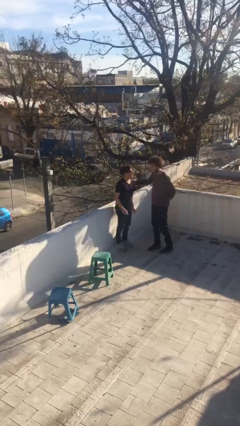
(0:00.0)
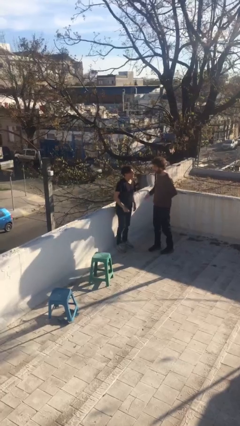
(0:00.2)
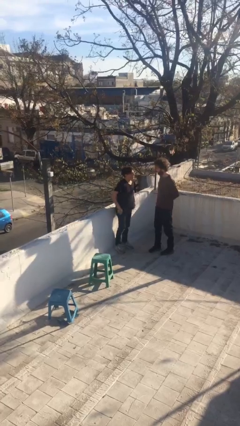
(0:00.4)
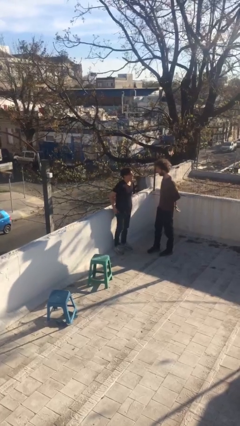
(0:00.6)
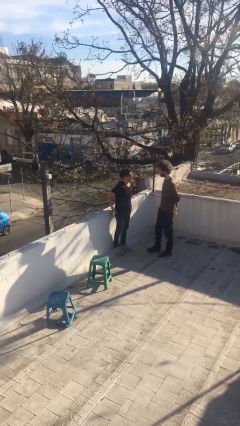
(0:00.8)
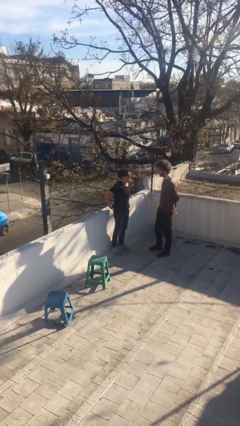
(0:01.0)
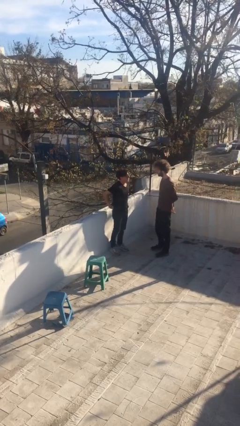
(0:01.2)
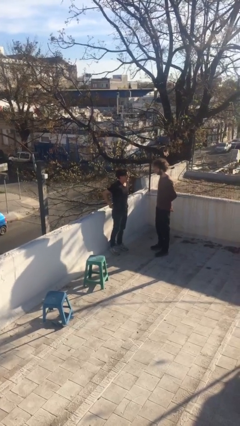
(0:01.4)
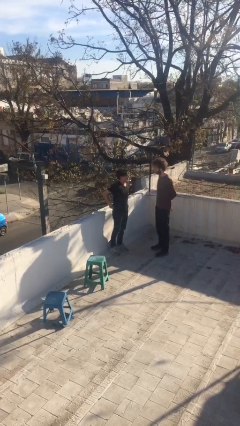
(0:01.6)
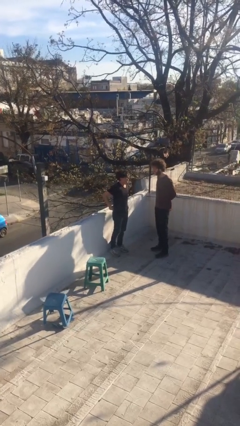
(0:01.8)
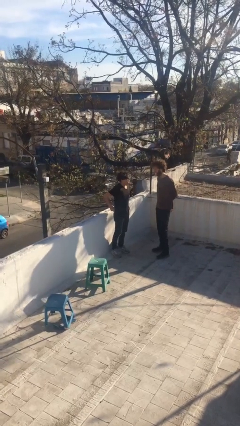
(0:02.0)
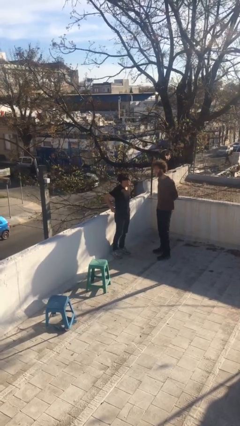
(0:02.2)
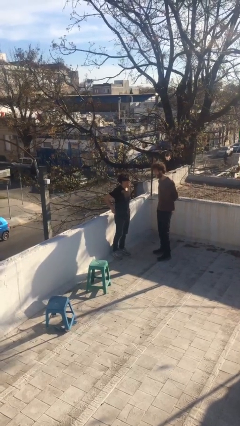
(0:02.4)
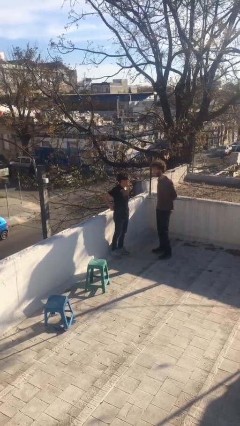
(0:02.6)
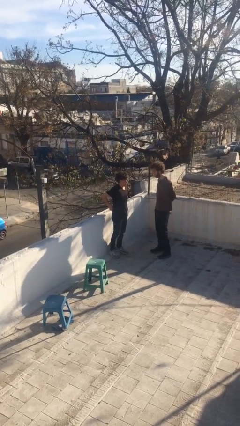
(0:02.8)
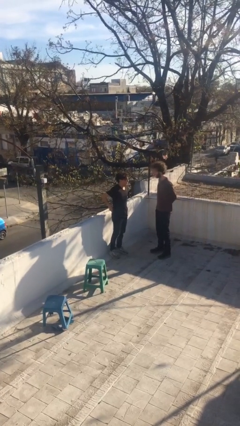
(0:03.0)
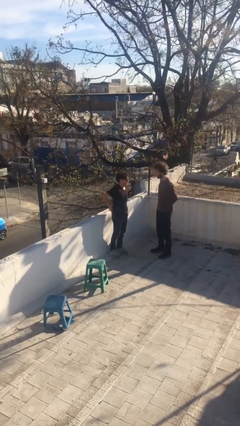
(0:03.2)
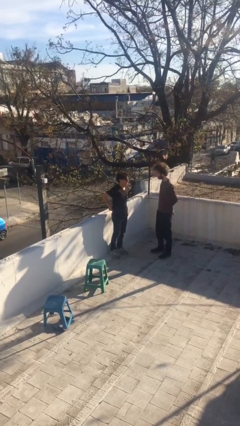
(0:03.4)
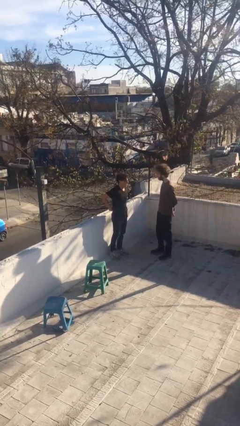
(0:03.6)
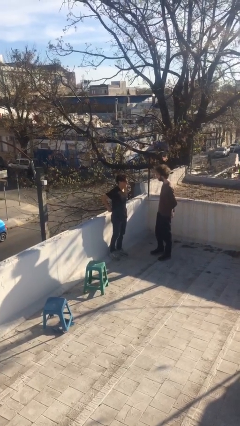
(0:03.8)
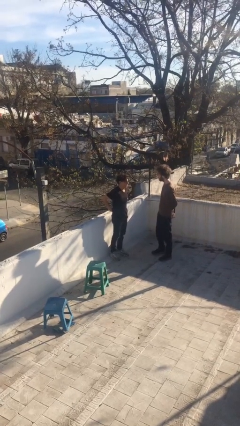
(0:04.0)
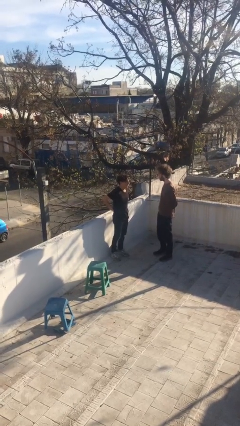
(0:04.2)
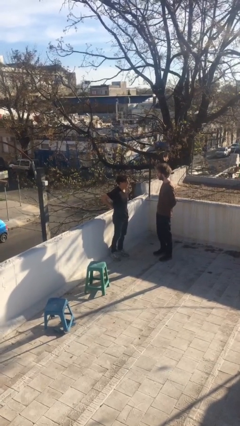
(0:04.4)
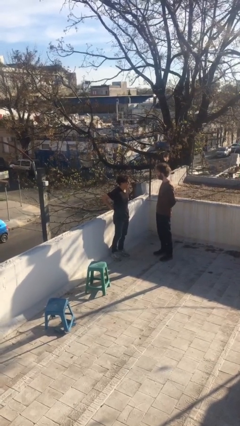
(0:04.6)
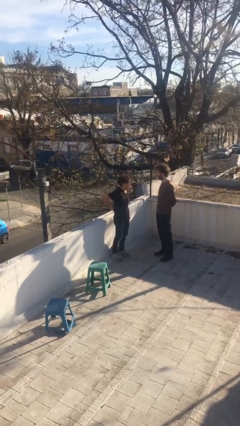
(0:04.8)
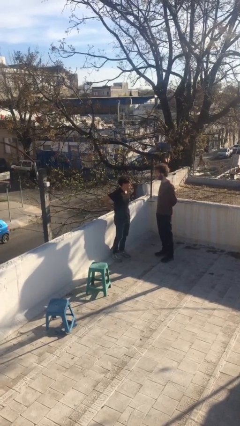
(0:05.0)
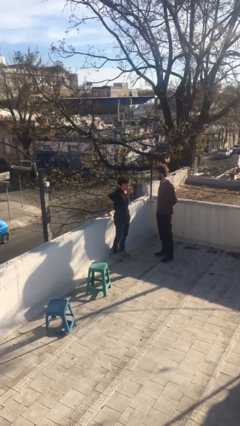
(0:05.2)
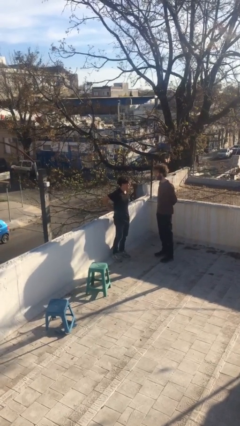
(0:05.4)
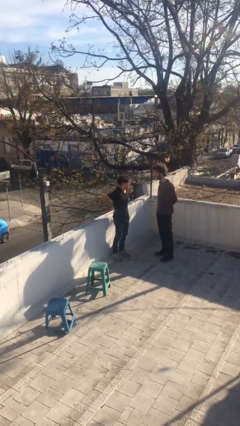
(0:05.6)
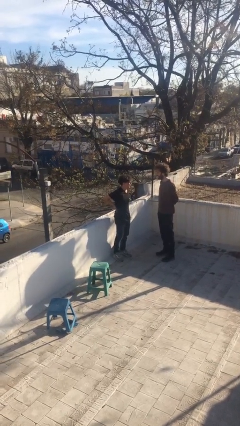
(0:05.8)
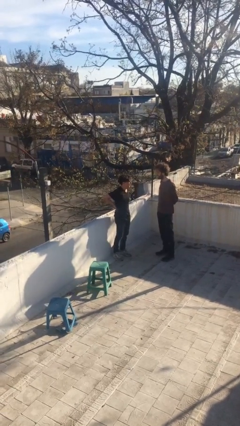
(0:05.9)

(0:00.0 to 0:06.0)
person talks to person

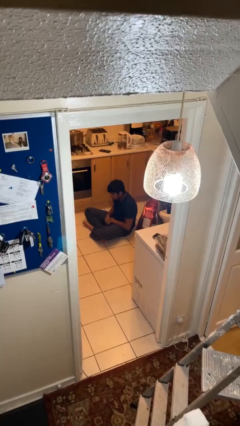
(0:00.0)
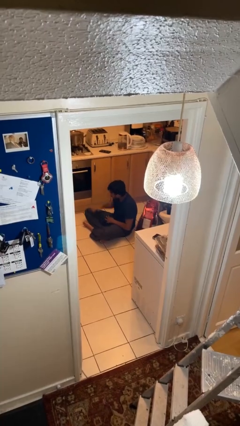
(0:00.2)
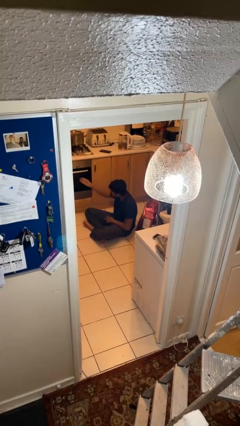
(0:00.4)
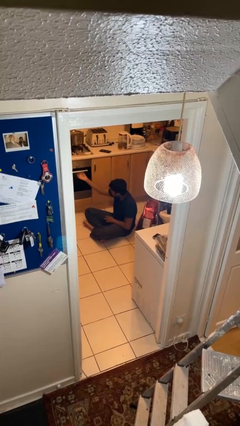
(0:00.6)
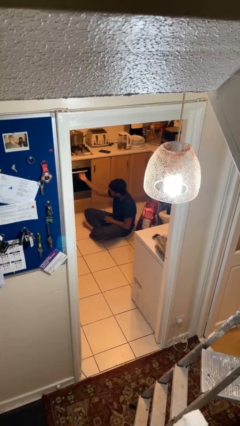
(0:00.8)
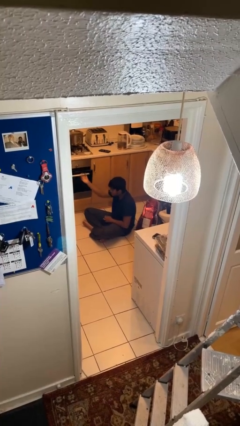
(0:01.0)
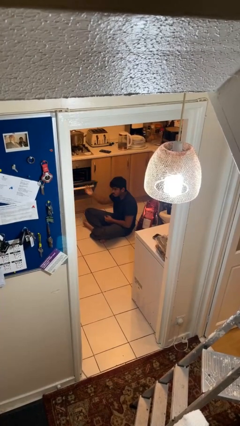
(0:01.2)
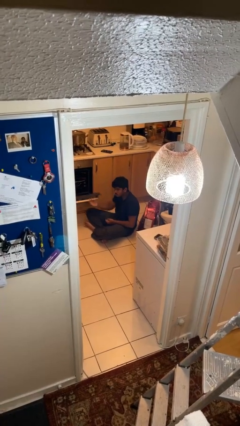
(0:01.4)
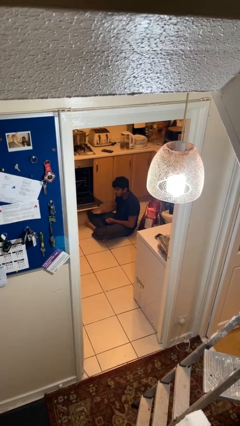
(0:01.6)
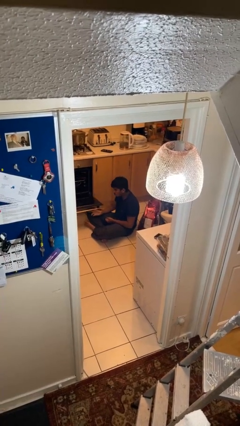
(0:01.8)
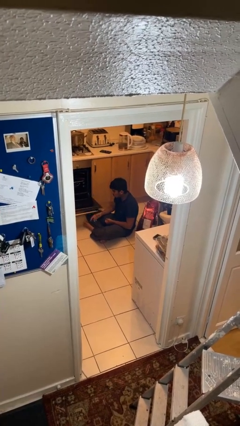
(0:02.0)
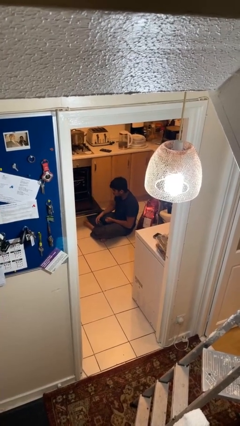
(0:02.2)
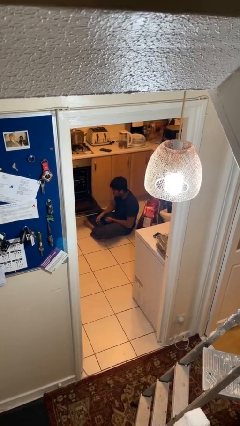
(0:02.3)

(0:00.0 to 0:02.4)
person opens oven door

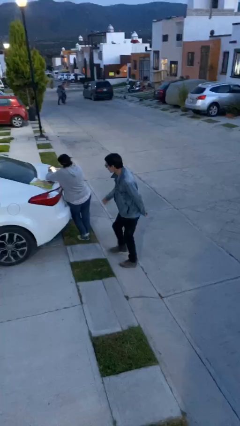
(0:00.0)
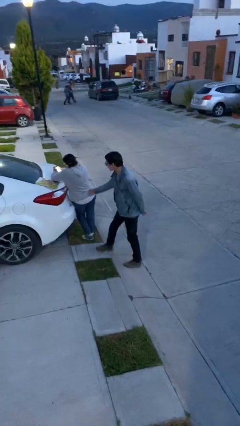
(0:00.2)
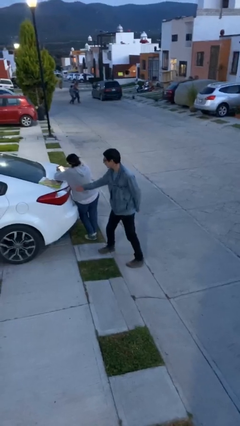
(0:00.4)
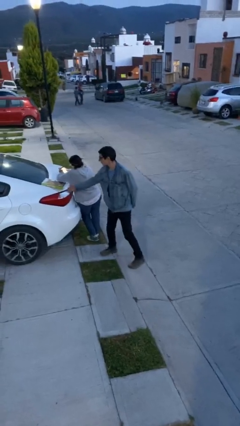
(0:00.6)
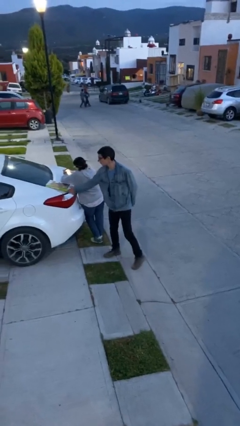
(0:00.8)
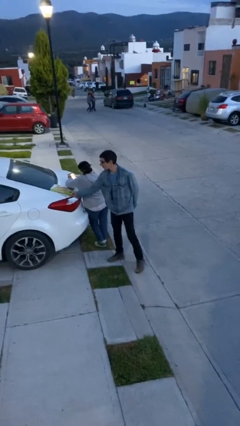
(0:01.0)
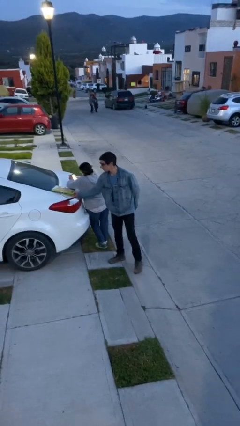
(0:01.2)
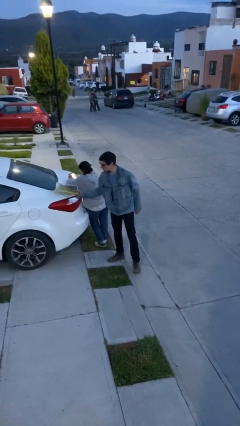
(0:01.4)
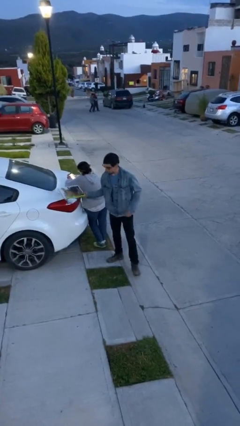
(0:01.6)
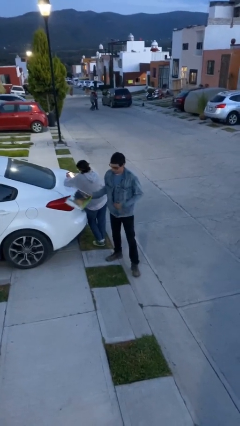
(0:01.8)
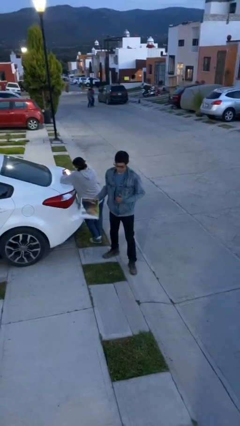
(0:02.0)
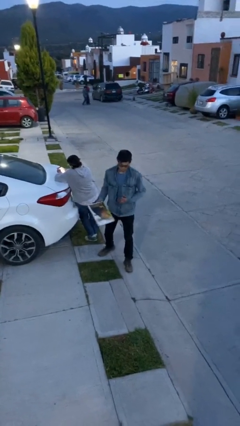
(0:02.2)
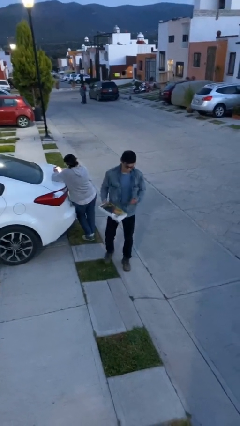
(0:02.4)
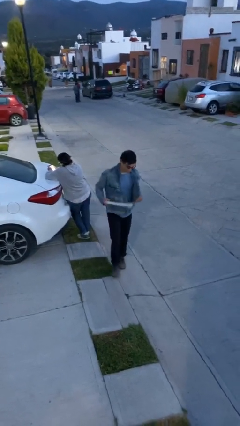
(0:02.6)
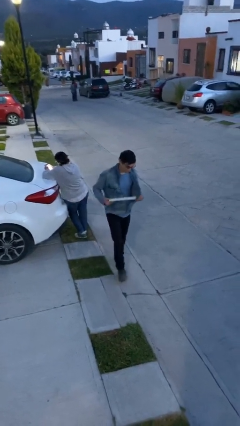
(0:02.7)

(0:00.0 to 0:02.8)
person steals object from person

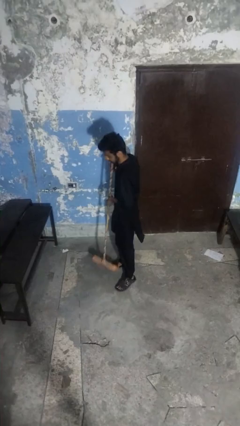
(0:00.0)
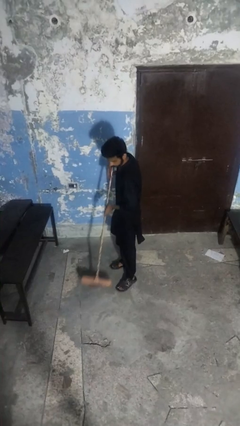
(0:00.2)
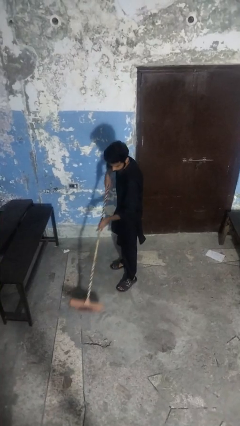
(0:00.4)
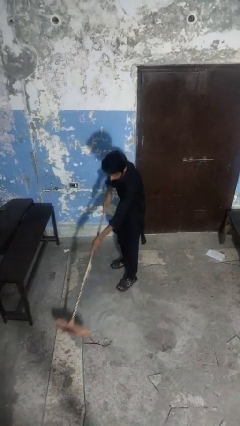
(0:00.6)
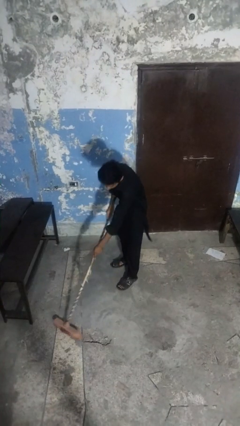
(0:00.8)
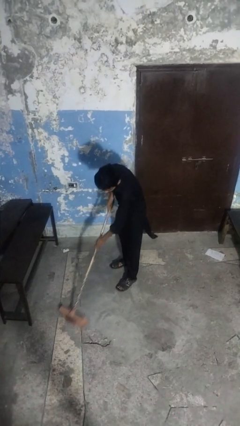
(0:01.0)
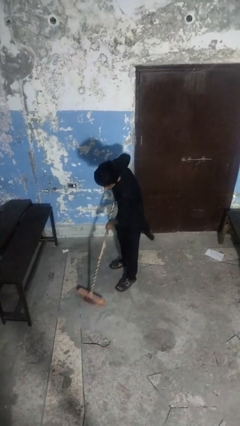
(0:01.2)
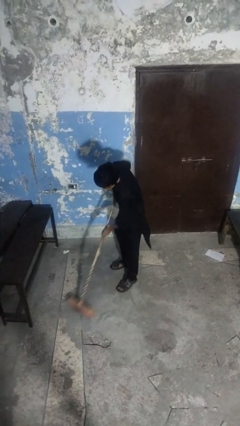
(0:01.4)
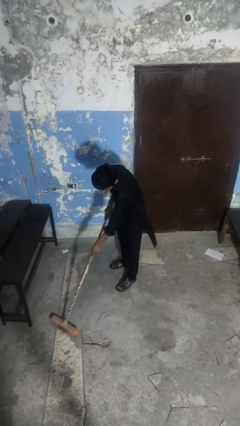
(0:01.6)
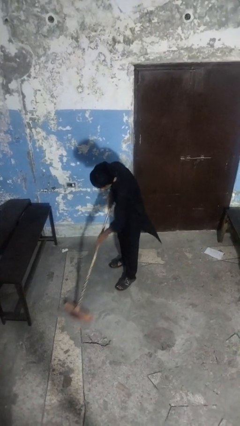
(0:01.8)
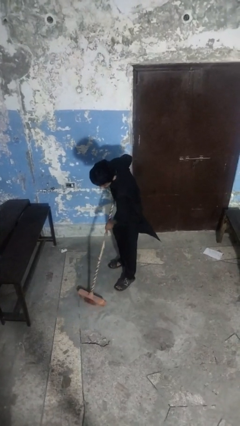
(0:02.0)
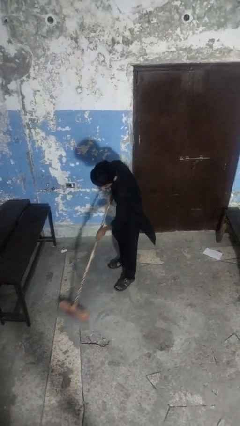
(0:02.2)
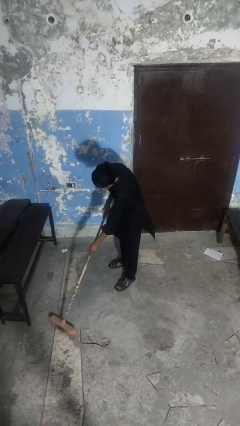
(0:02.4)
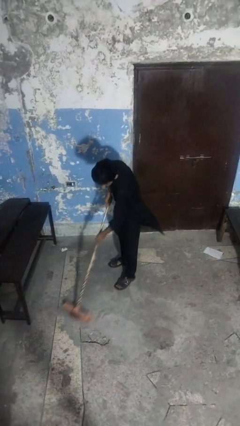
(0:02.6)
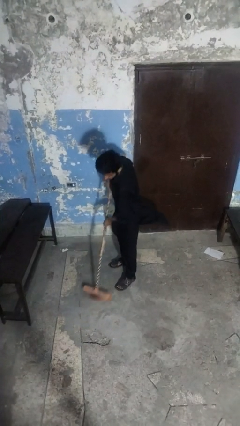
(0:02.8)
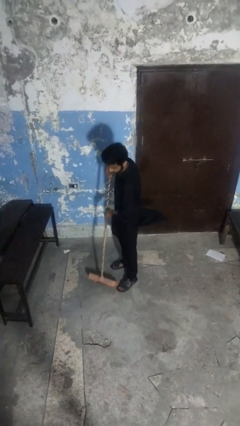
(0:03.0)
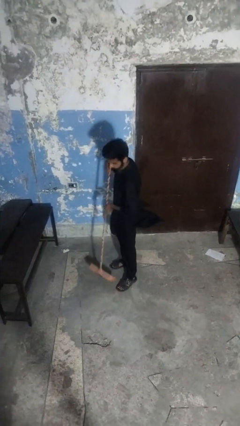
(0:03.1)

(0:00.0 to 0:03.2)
person sweeps floor

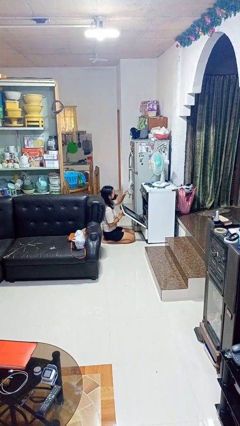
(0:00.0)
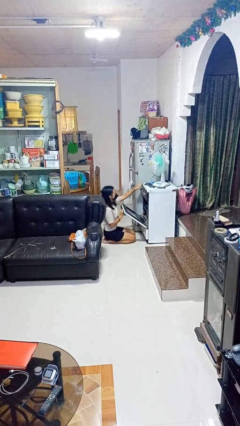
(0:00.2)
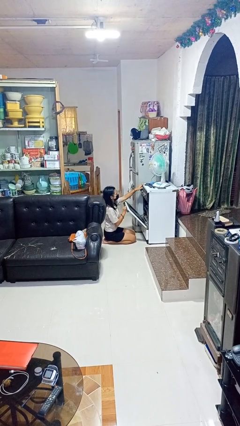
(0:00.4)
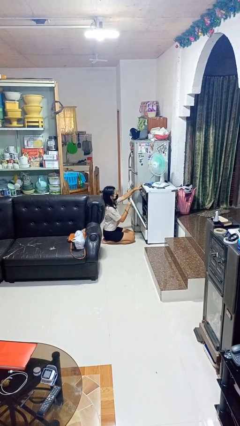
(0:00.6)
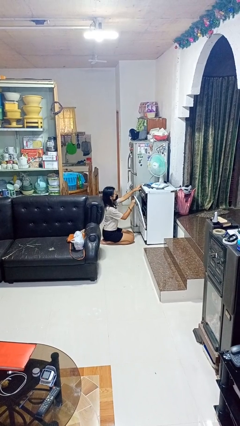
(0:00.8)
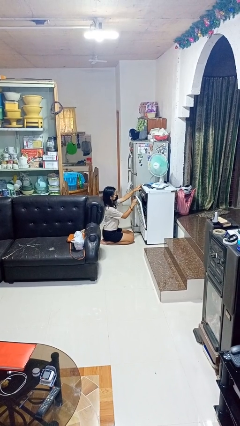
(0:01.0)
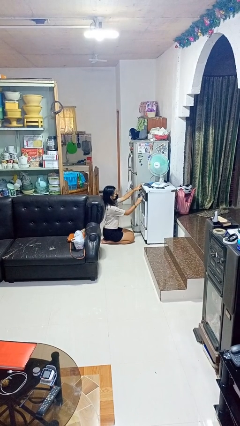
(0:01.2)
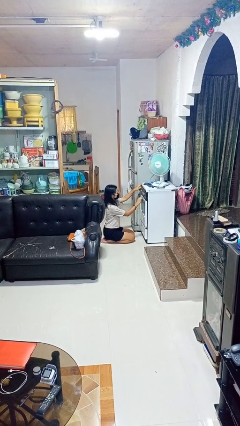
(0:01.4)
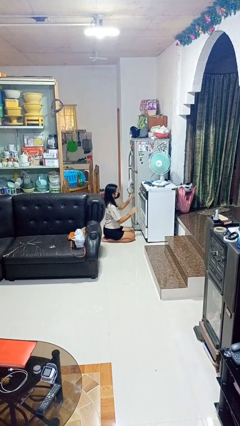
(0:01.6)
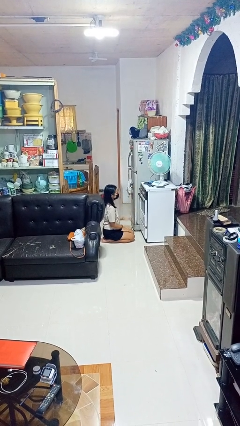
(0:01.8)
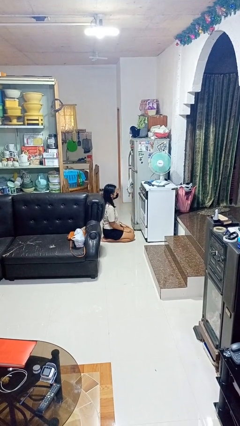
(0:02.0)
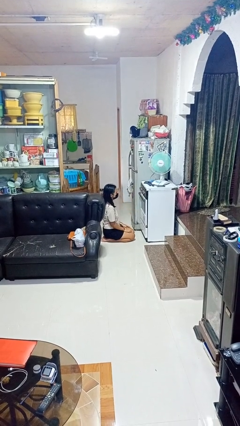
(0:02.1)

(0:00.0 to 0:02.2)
person closes oven door

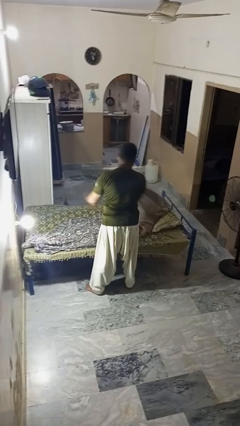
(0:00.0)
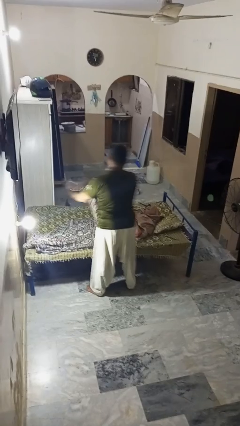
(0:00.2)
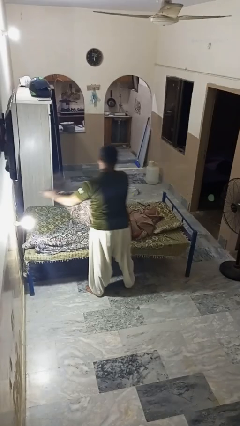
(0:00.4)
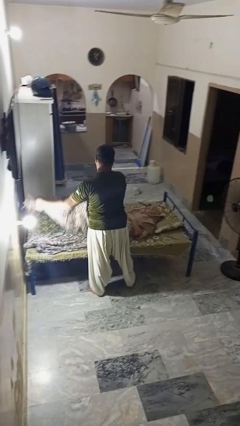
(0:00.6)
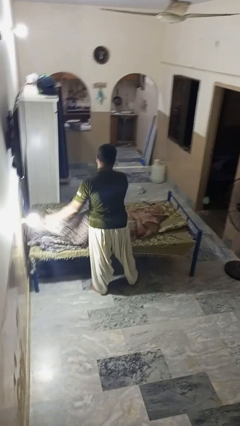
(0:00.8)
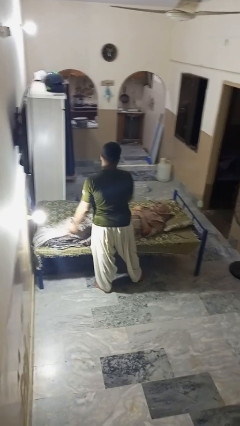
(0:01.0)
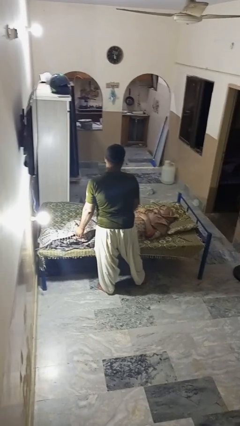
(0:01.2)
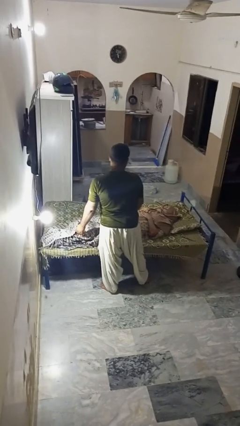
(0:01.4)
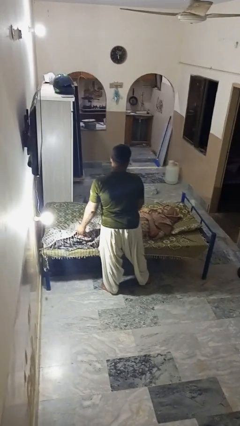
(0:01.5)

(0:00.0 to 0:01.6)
person uncovers friend with blanket
